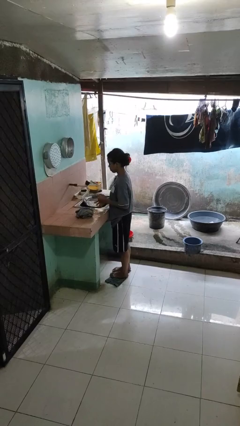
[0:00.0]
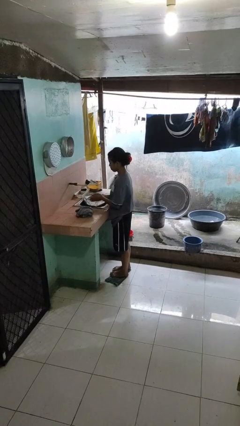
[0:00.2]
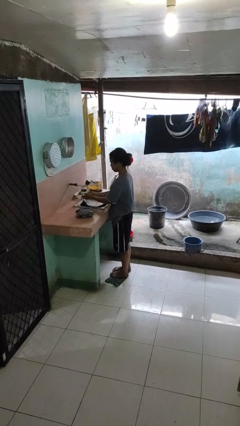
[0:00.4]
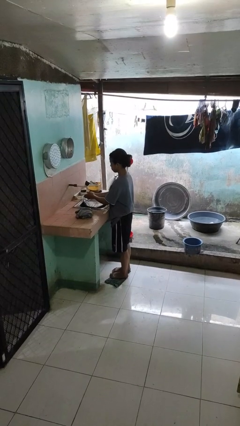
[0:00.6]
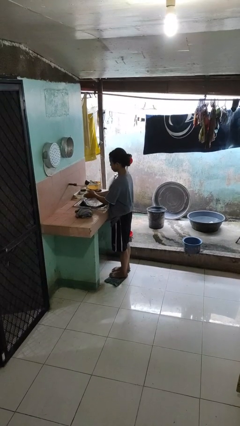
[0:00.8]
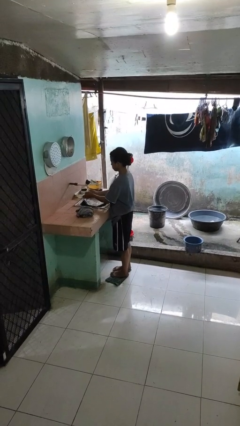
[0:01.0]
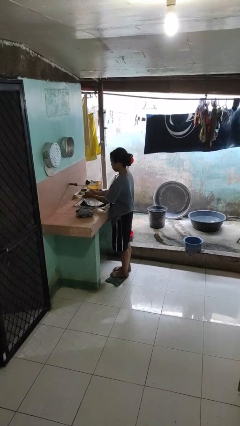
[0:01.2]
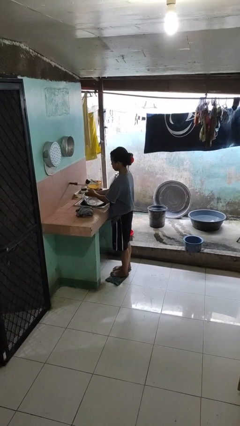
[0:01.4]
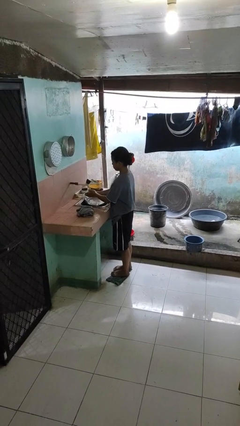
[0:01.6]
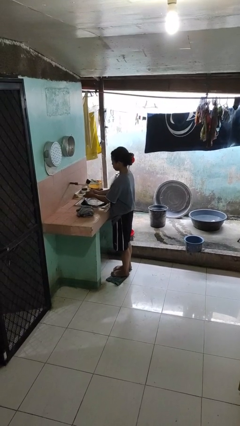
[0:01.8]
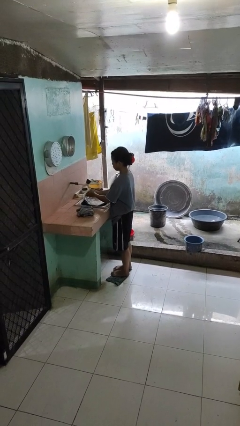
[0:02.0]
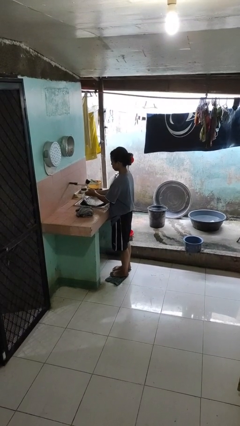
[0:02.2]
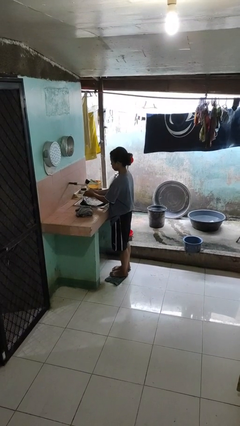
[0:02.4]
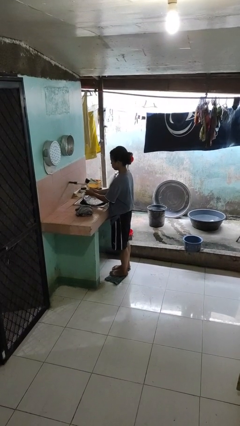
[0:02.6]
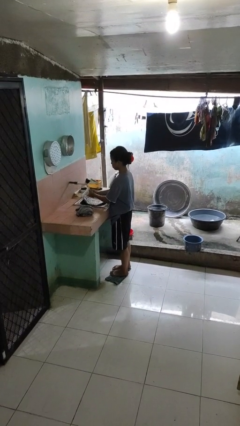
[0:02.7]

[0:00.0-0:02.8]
person washes hands

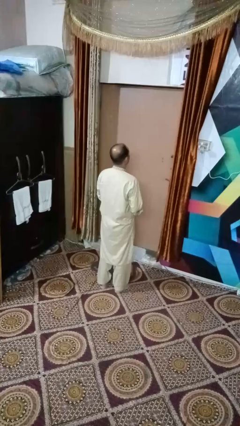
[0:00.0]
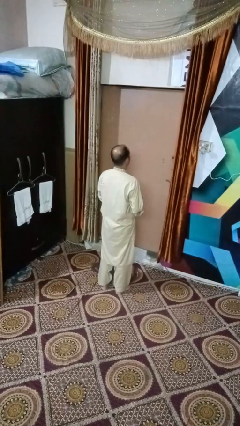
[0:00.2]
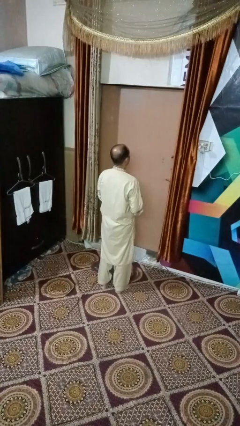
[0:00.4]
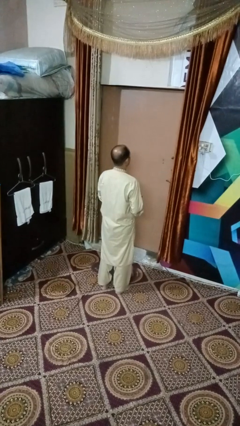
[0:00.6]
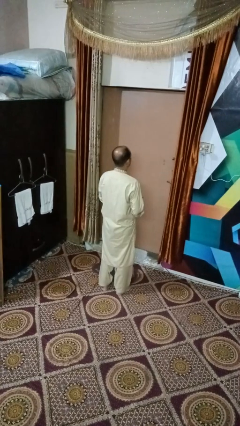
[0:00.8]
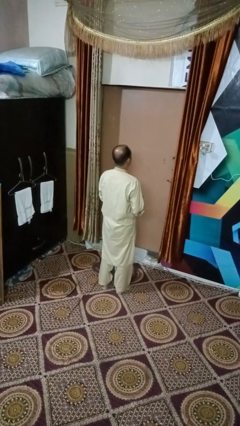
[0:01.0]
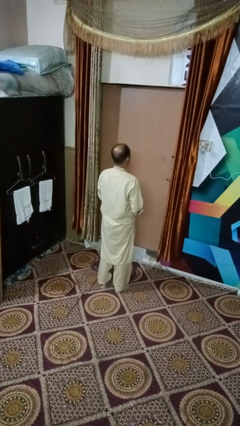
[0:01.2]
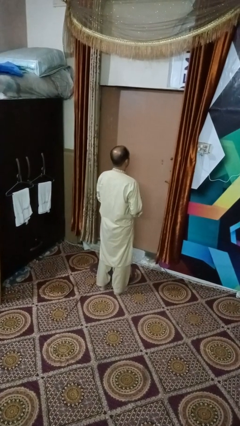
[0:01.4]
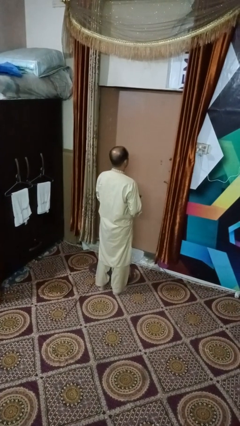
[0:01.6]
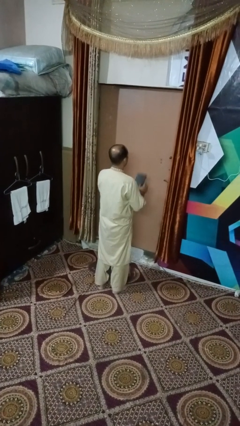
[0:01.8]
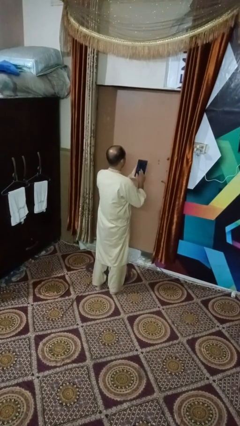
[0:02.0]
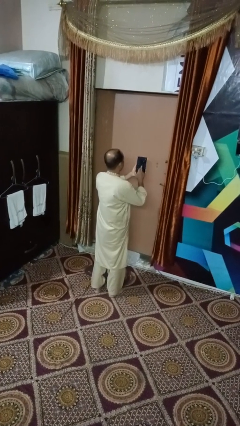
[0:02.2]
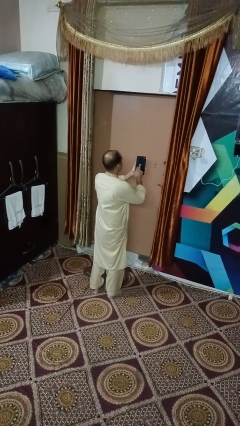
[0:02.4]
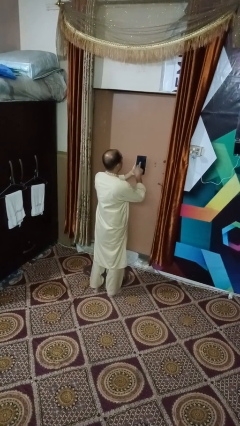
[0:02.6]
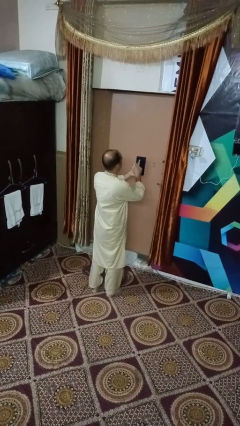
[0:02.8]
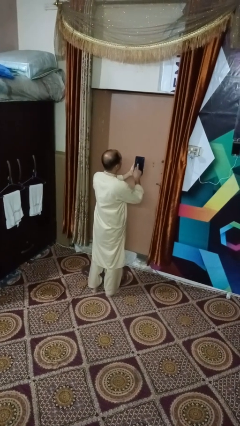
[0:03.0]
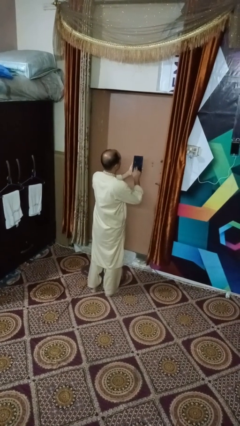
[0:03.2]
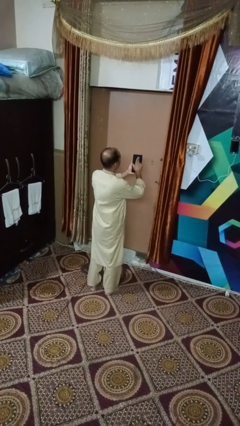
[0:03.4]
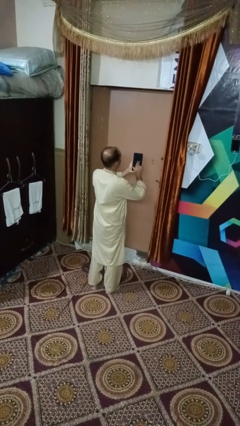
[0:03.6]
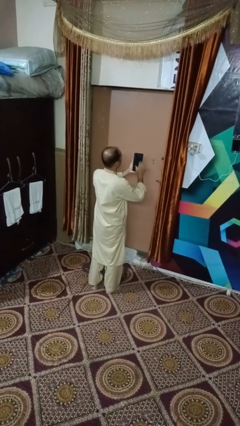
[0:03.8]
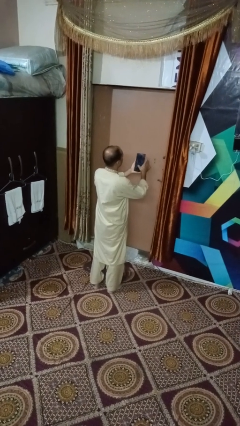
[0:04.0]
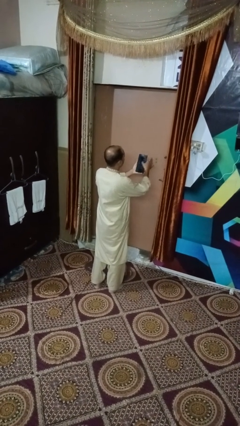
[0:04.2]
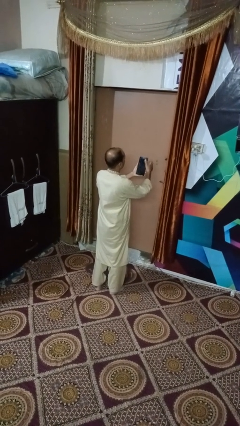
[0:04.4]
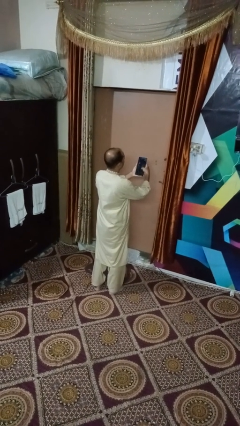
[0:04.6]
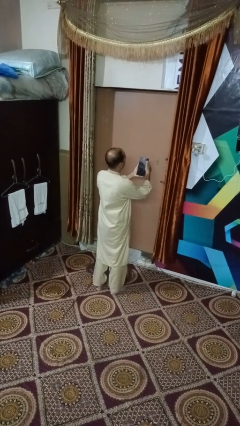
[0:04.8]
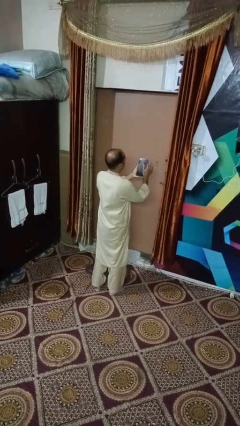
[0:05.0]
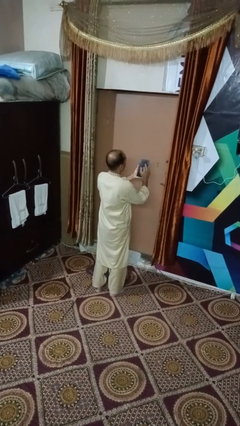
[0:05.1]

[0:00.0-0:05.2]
person interacts with tablet

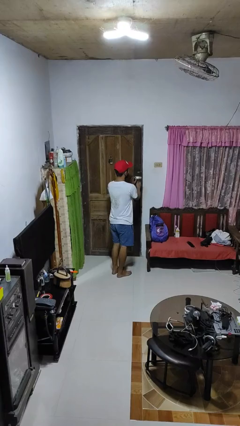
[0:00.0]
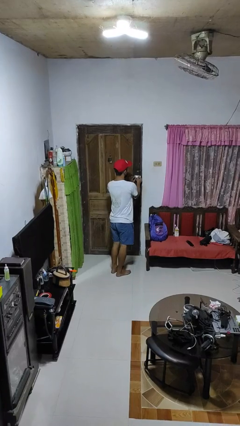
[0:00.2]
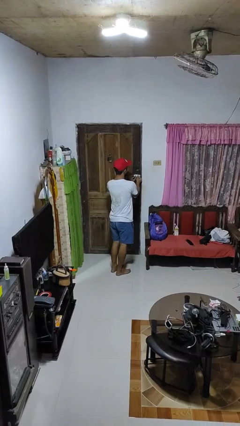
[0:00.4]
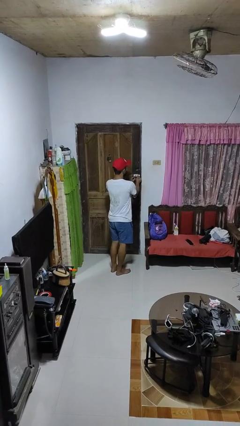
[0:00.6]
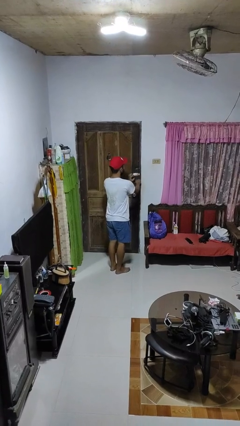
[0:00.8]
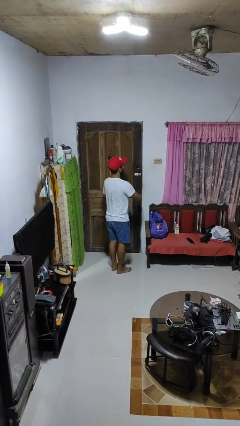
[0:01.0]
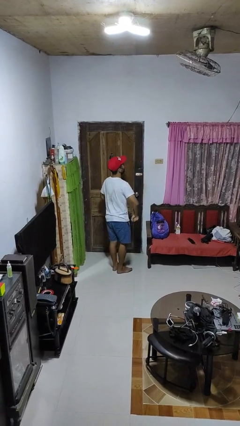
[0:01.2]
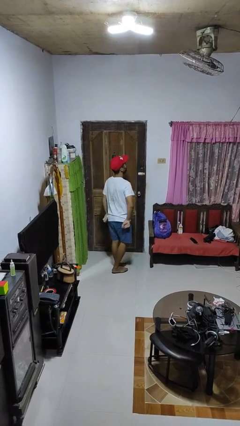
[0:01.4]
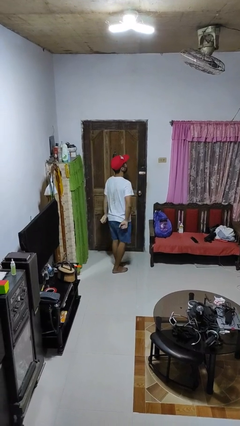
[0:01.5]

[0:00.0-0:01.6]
person locks door with keys

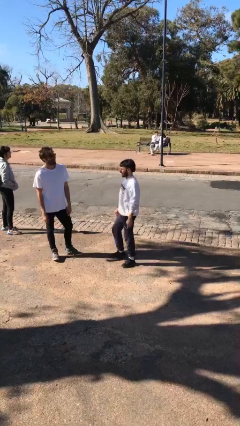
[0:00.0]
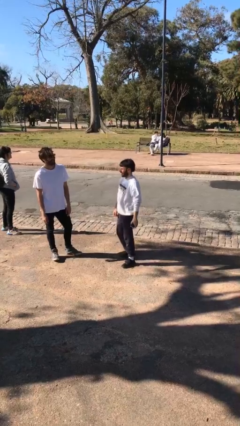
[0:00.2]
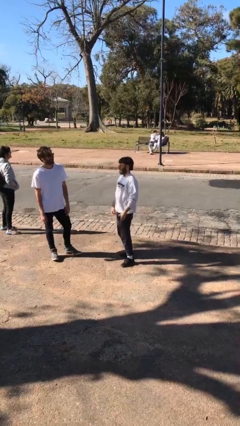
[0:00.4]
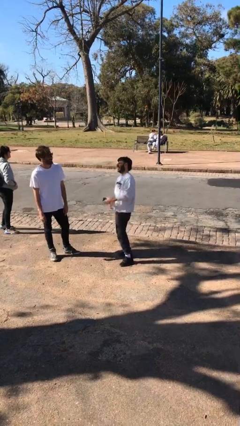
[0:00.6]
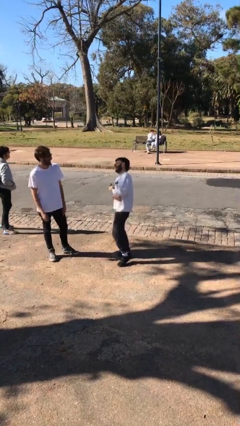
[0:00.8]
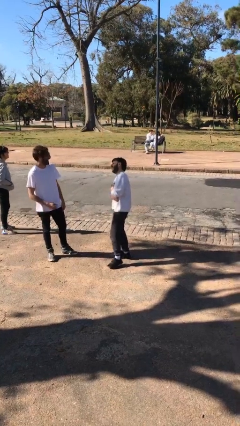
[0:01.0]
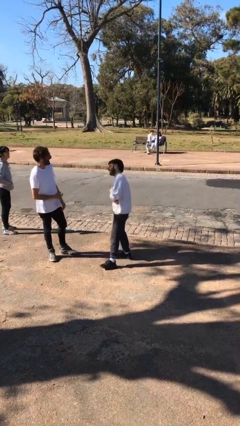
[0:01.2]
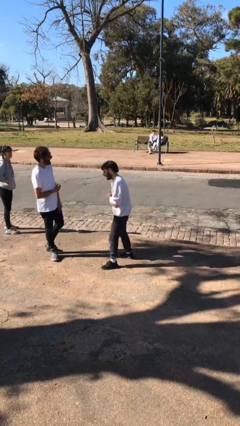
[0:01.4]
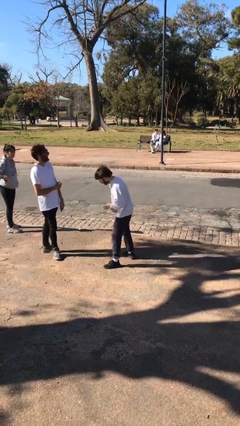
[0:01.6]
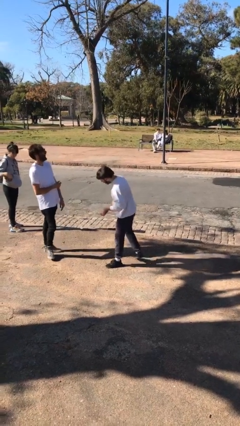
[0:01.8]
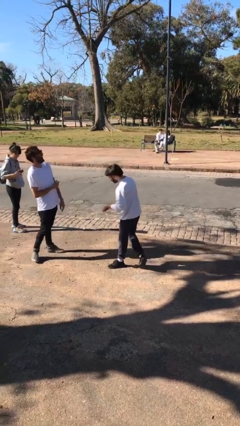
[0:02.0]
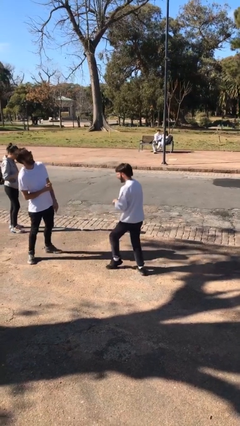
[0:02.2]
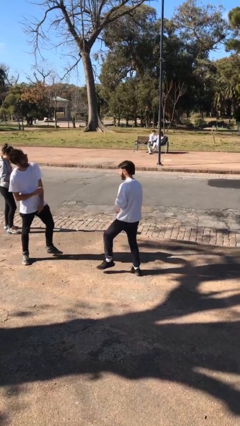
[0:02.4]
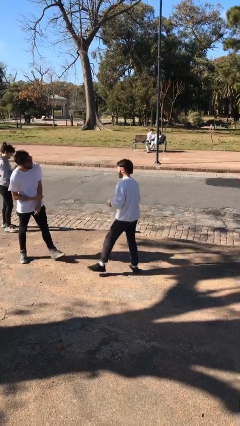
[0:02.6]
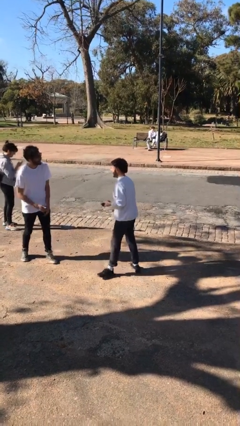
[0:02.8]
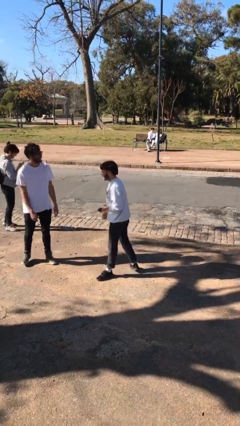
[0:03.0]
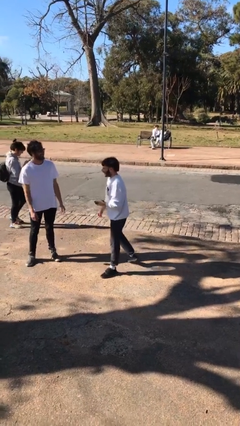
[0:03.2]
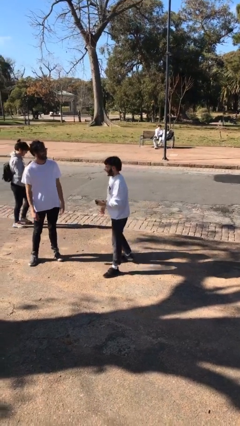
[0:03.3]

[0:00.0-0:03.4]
person laughs with person

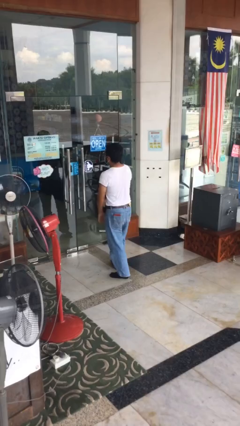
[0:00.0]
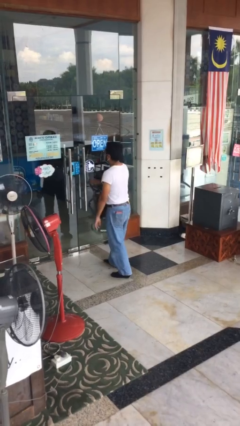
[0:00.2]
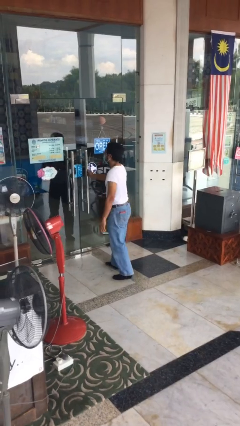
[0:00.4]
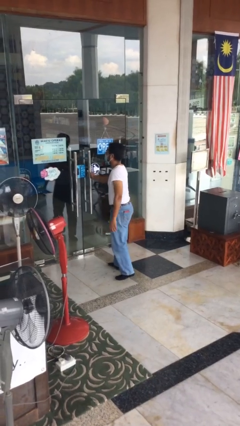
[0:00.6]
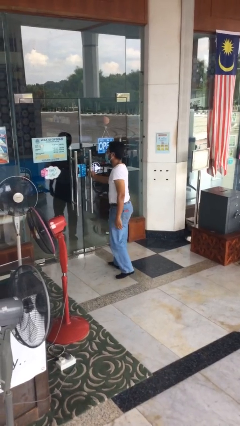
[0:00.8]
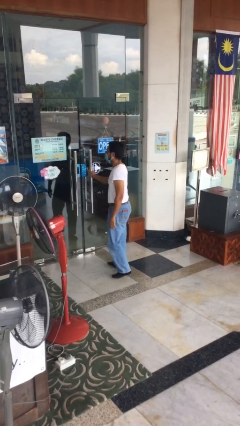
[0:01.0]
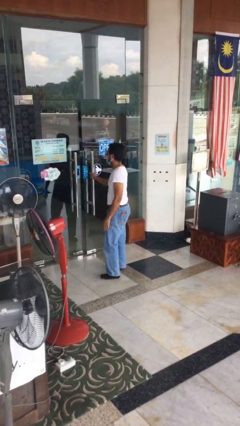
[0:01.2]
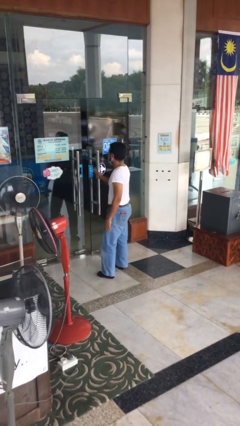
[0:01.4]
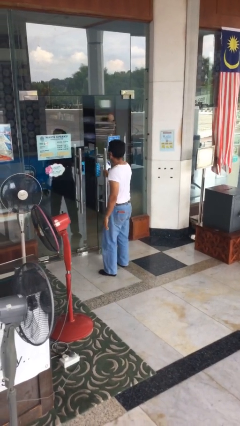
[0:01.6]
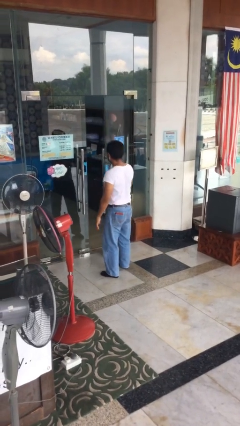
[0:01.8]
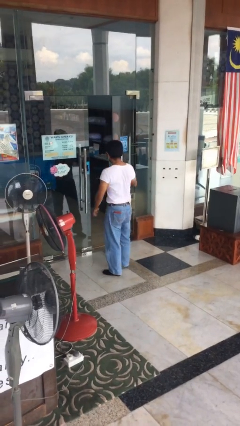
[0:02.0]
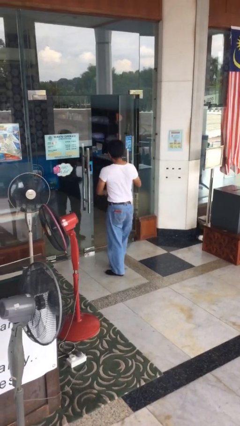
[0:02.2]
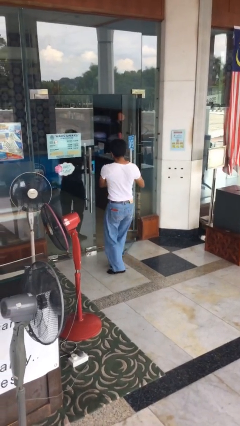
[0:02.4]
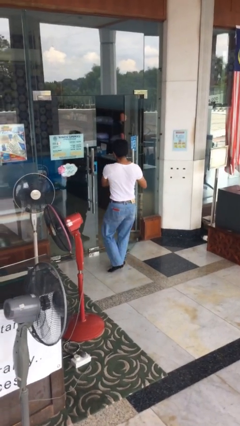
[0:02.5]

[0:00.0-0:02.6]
person opens facility door

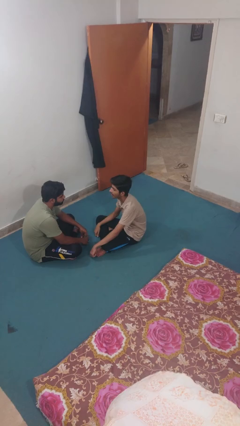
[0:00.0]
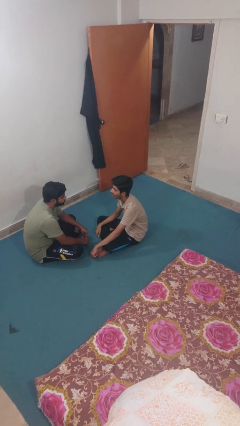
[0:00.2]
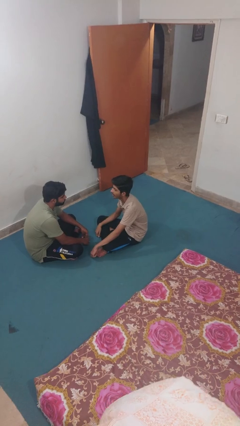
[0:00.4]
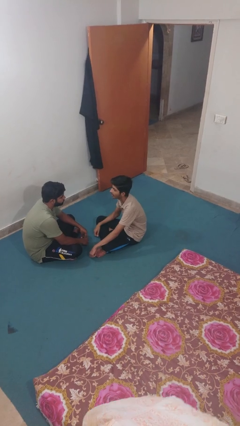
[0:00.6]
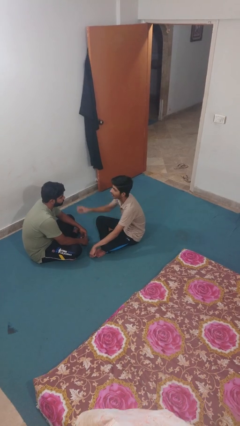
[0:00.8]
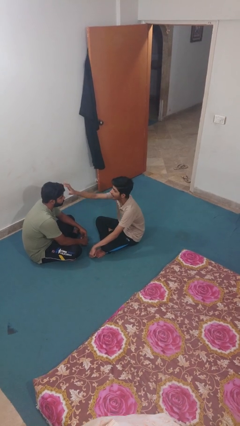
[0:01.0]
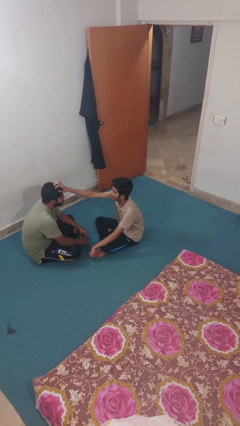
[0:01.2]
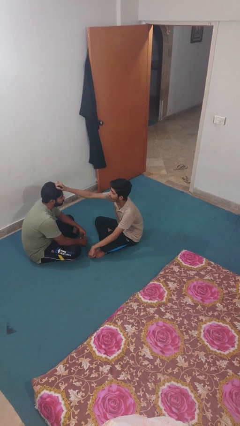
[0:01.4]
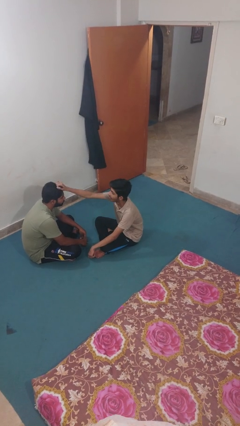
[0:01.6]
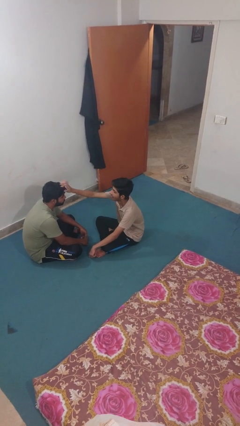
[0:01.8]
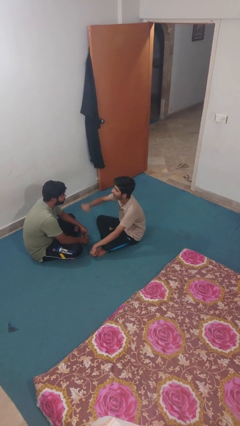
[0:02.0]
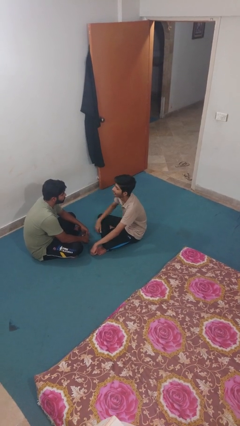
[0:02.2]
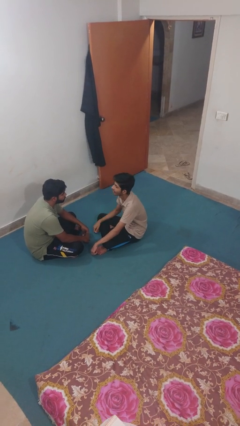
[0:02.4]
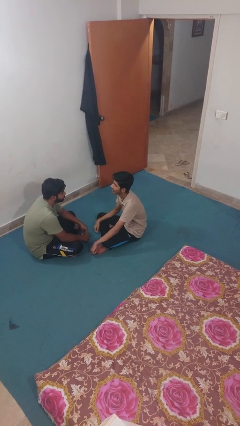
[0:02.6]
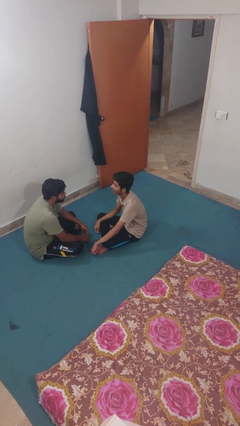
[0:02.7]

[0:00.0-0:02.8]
person grabs person by hair
